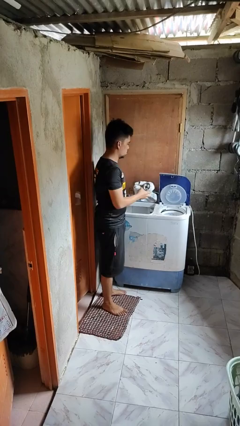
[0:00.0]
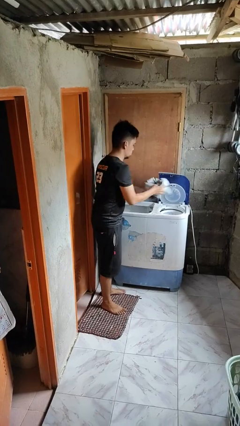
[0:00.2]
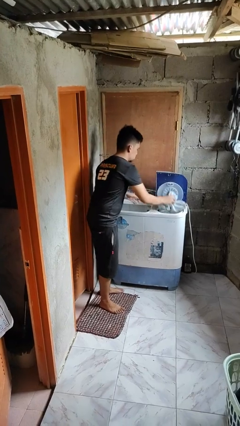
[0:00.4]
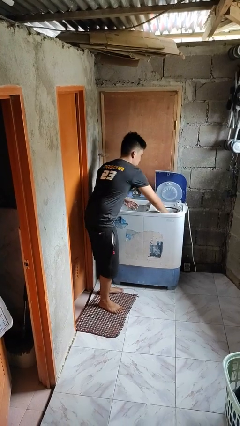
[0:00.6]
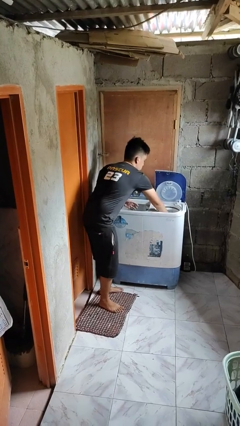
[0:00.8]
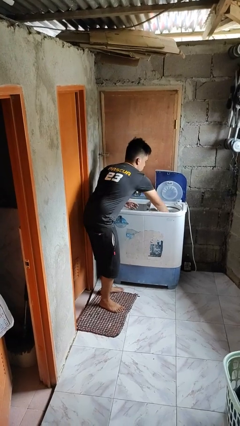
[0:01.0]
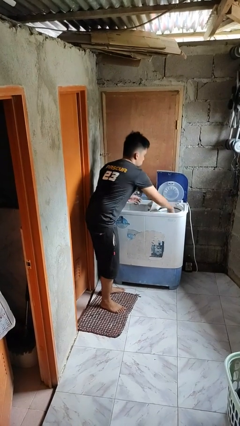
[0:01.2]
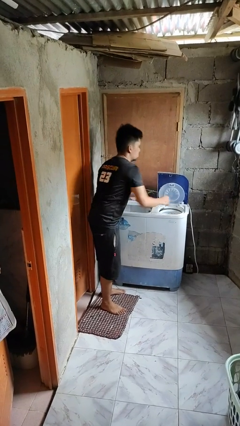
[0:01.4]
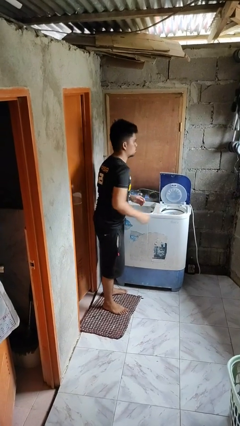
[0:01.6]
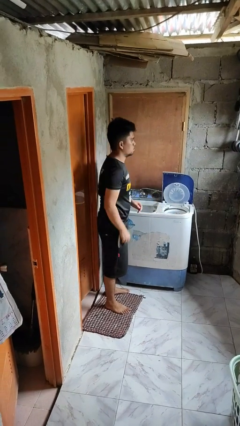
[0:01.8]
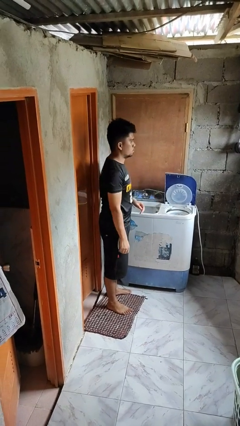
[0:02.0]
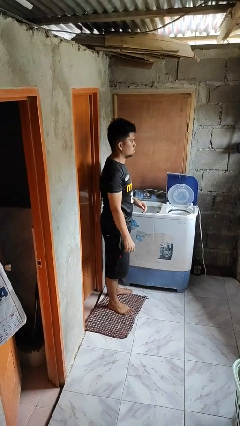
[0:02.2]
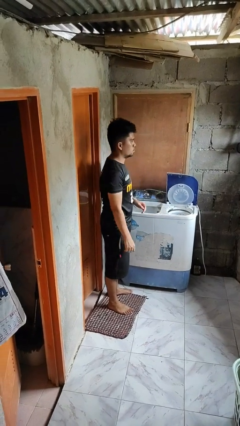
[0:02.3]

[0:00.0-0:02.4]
person loads dryer

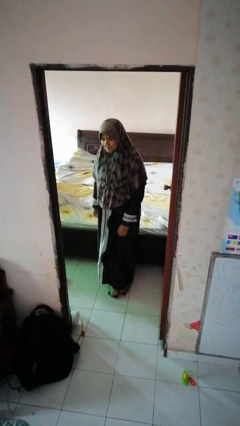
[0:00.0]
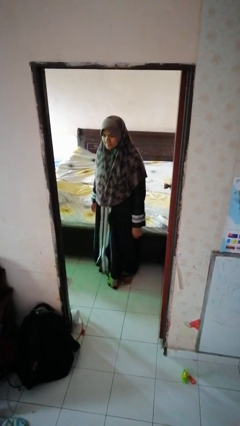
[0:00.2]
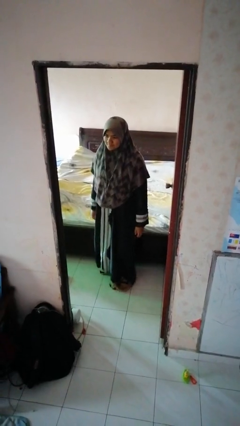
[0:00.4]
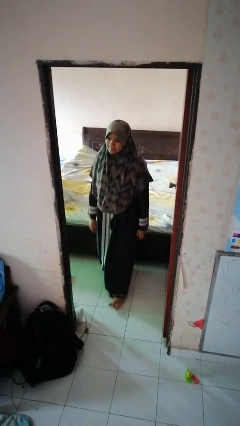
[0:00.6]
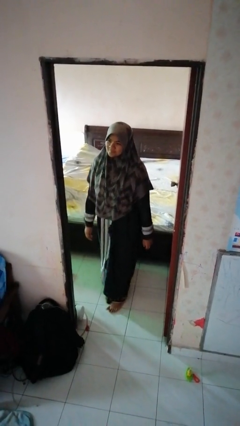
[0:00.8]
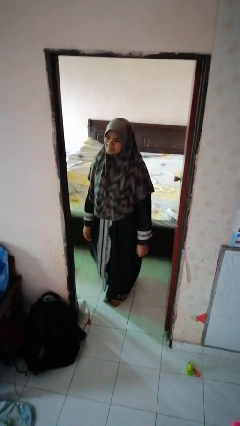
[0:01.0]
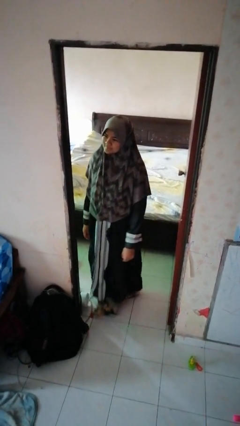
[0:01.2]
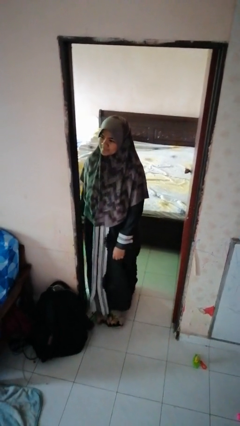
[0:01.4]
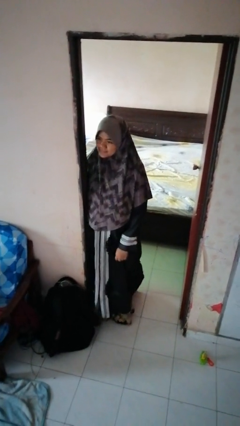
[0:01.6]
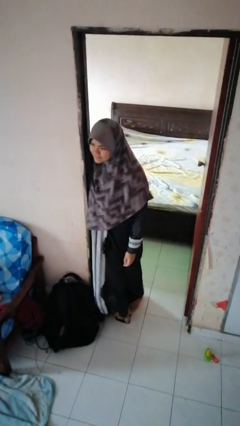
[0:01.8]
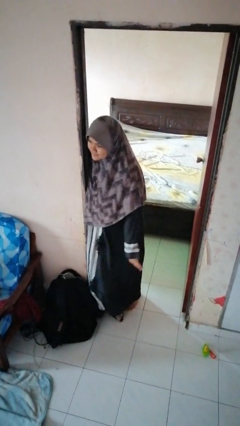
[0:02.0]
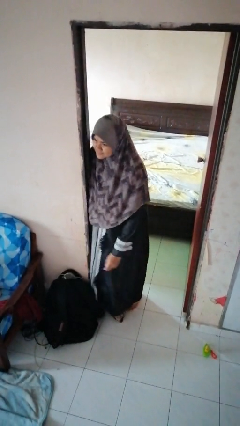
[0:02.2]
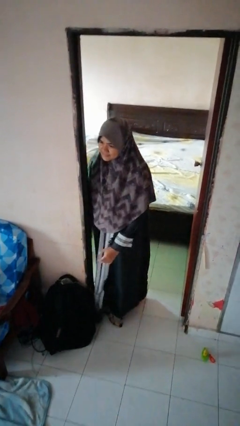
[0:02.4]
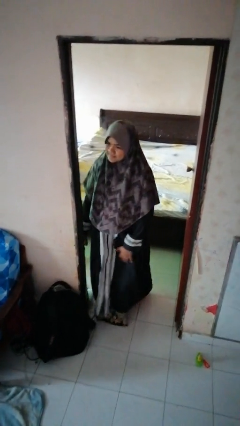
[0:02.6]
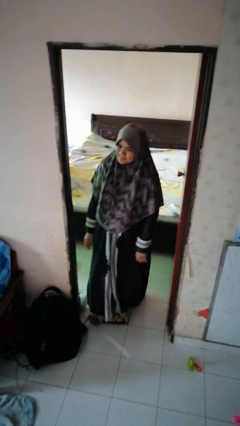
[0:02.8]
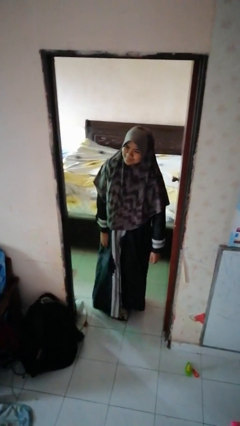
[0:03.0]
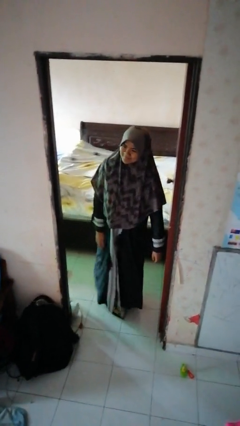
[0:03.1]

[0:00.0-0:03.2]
person bumps into wall

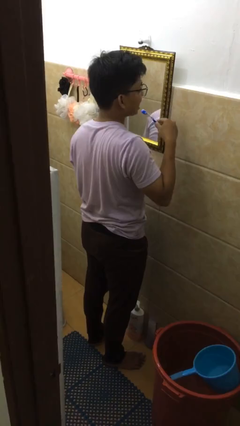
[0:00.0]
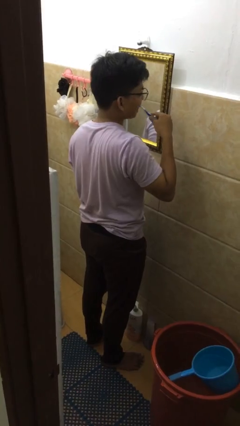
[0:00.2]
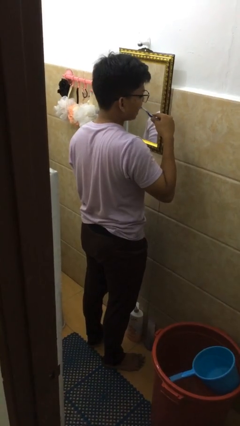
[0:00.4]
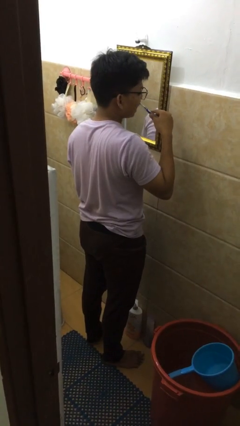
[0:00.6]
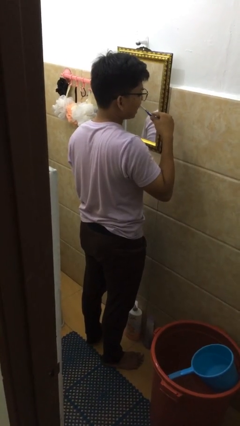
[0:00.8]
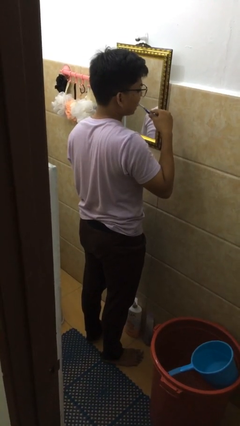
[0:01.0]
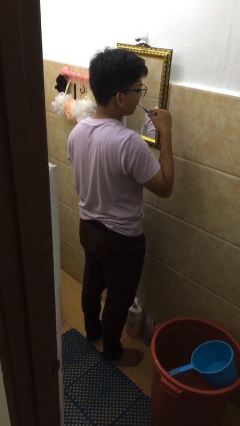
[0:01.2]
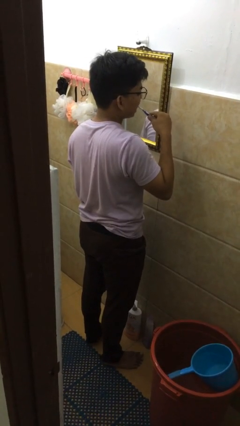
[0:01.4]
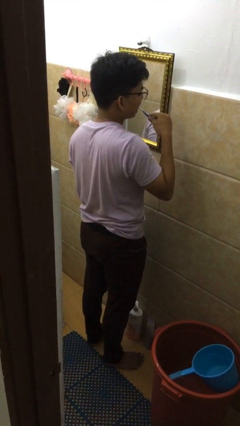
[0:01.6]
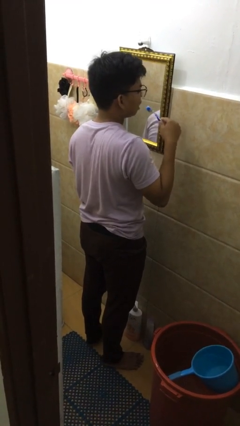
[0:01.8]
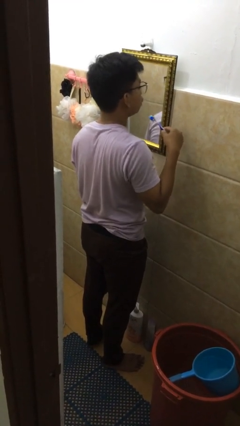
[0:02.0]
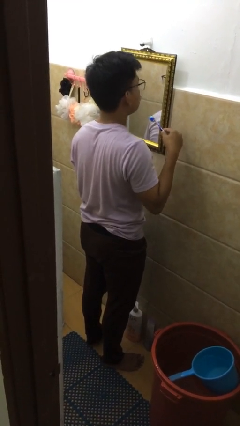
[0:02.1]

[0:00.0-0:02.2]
person brushes teeth

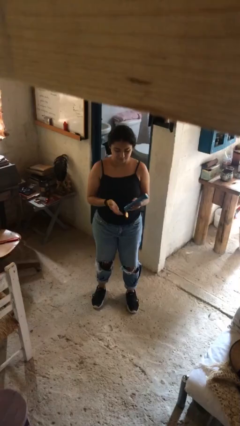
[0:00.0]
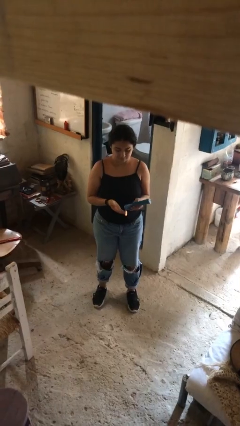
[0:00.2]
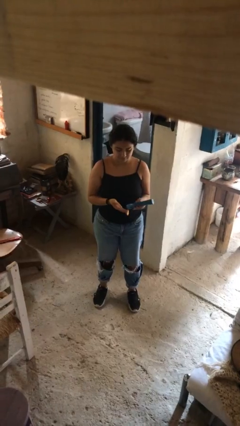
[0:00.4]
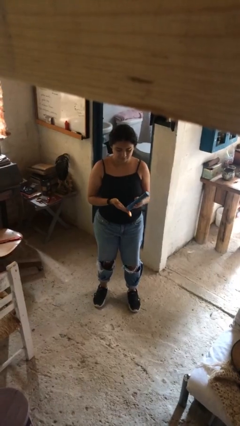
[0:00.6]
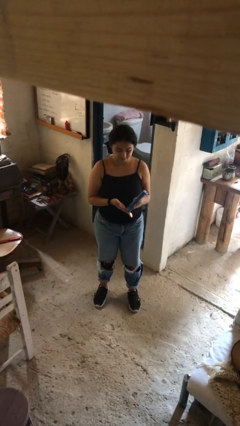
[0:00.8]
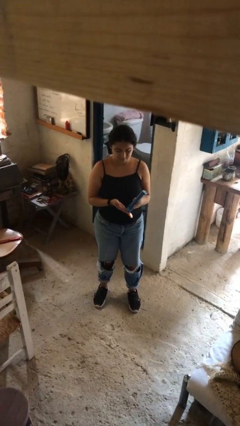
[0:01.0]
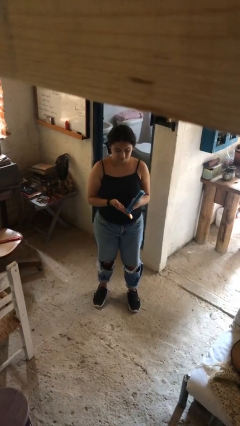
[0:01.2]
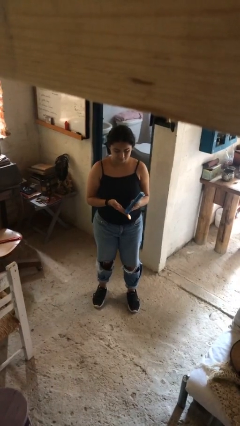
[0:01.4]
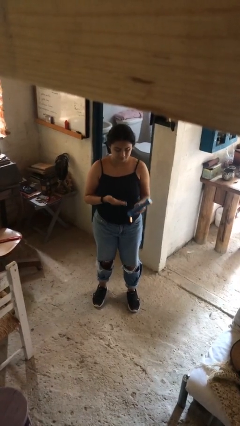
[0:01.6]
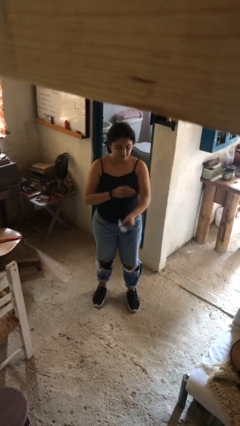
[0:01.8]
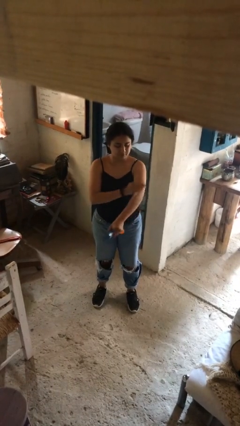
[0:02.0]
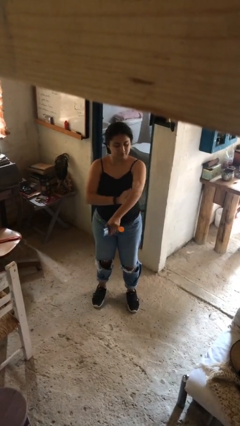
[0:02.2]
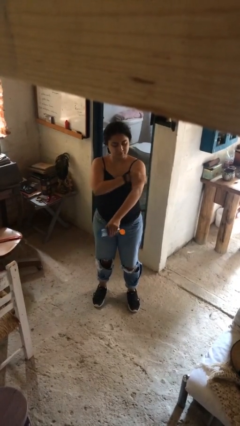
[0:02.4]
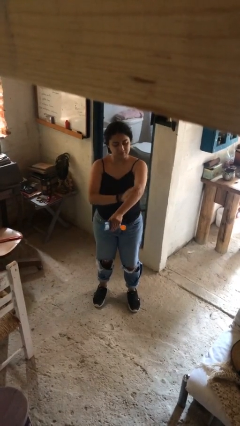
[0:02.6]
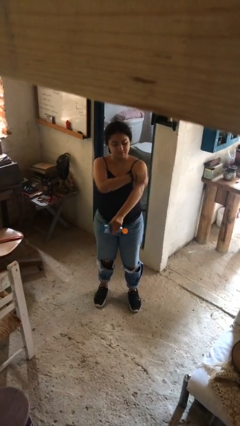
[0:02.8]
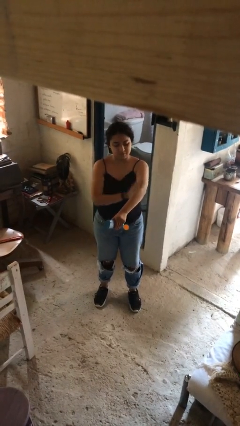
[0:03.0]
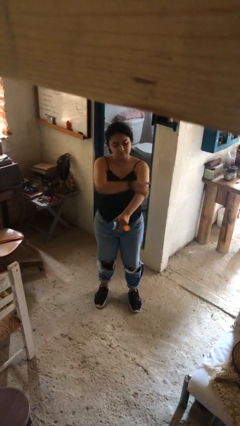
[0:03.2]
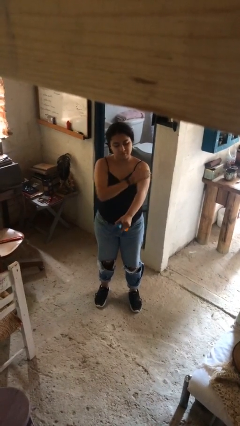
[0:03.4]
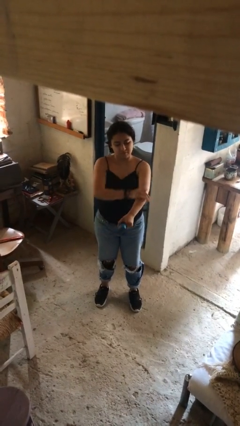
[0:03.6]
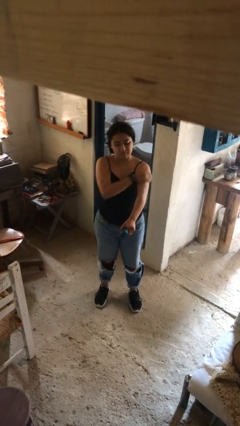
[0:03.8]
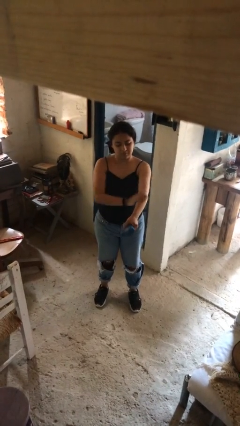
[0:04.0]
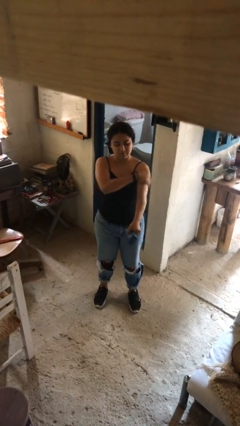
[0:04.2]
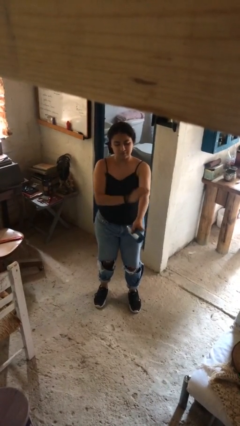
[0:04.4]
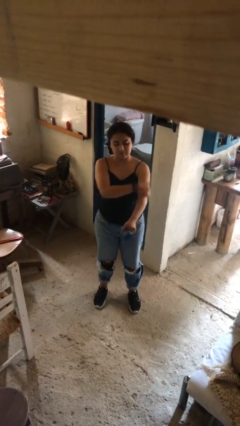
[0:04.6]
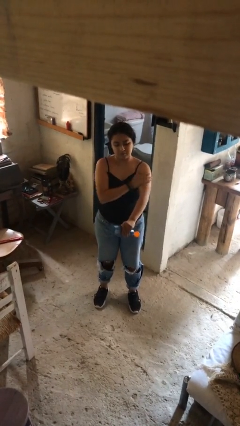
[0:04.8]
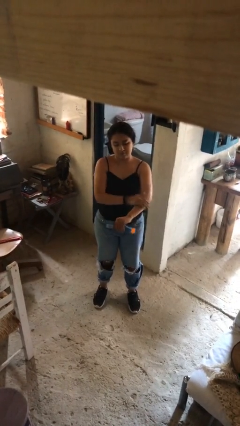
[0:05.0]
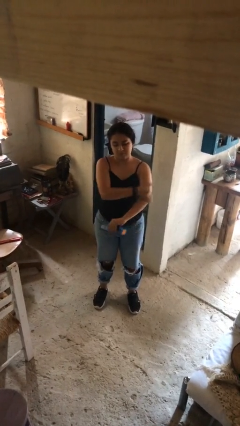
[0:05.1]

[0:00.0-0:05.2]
person applies sunscreen

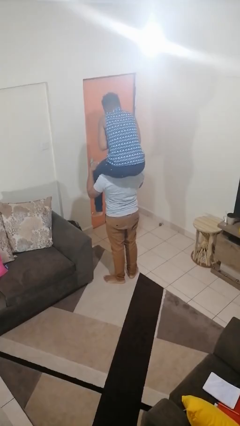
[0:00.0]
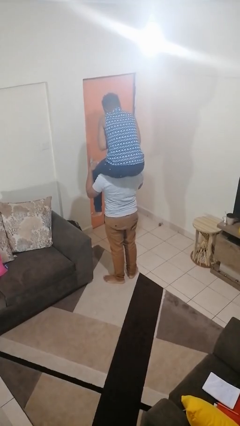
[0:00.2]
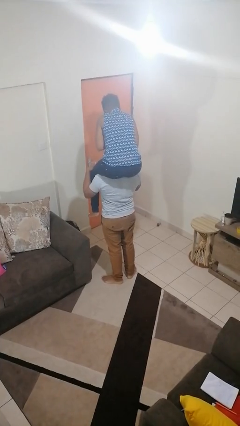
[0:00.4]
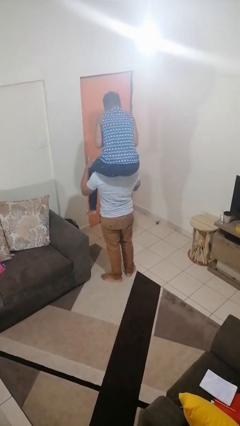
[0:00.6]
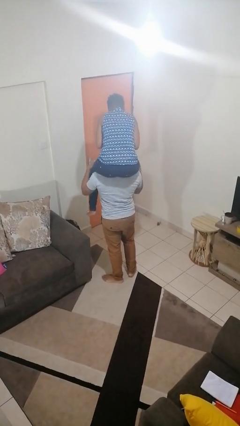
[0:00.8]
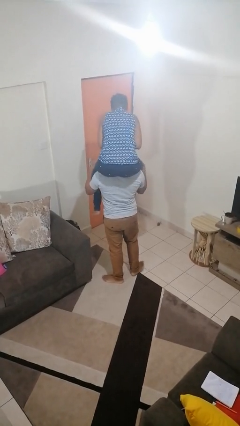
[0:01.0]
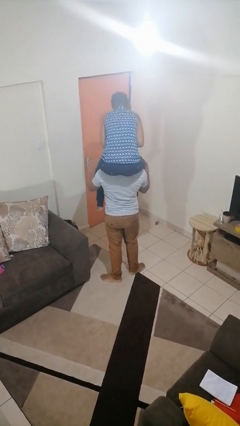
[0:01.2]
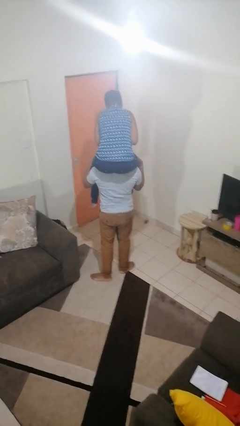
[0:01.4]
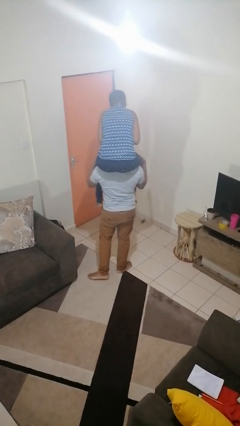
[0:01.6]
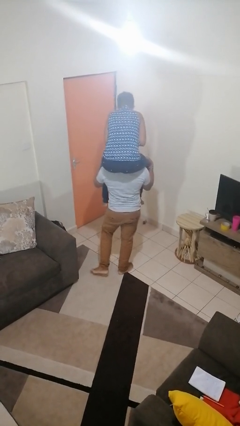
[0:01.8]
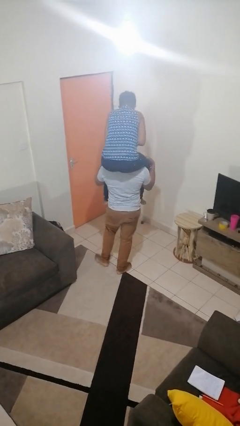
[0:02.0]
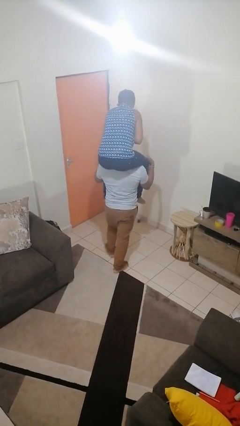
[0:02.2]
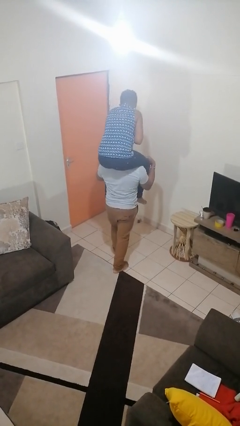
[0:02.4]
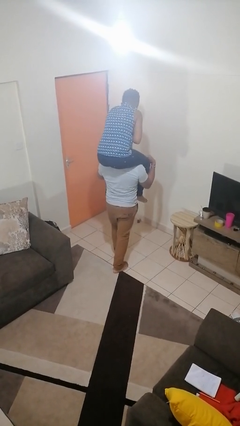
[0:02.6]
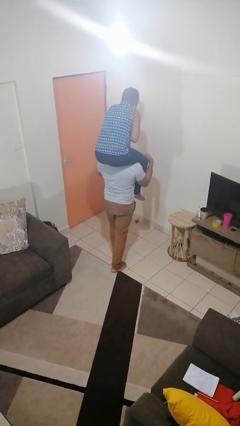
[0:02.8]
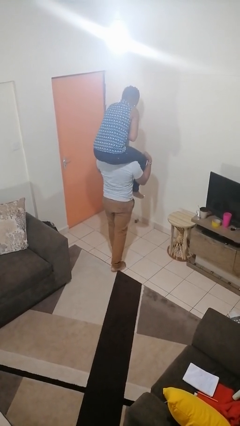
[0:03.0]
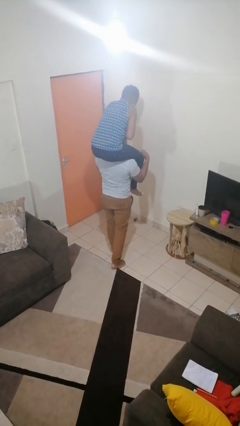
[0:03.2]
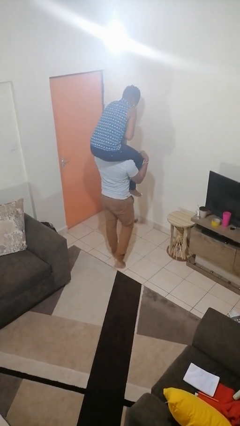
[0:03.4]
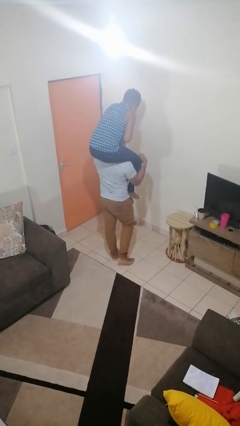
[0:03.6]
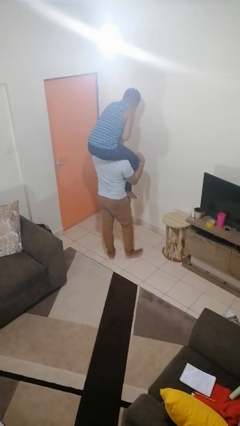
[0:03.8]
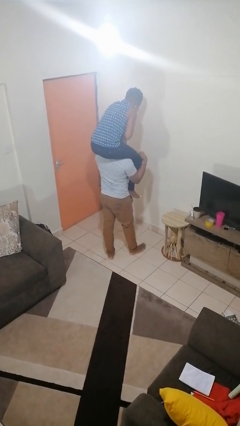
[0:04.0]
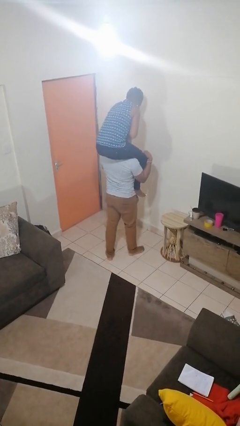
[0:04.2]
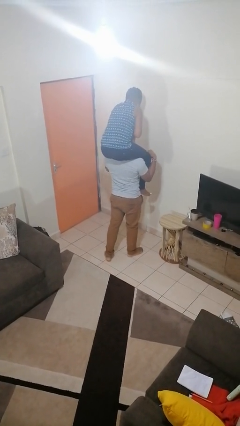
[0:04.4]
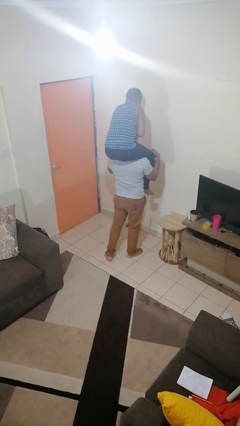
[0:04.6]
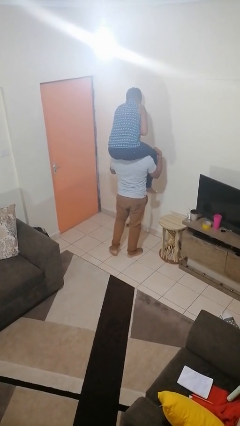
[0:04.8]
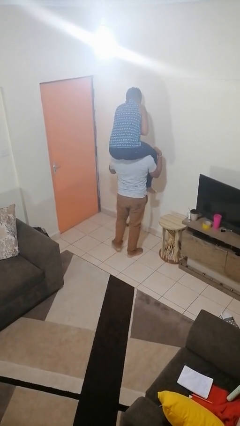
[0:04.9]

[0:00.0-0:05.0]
person carries person on shoulders
